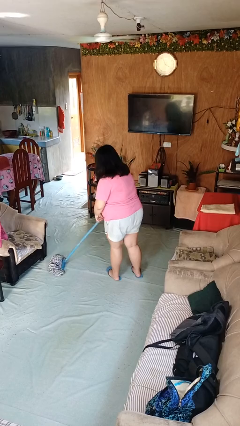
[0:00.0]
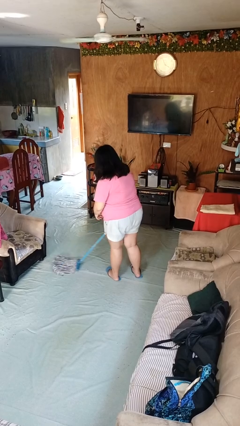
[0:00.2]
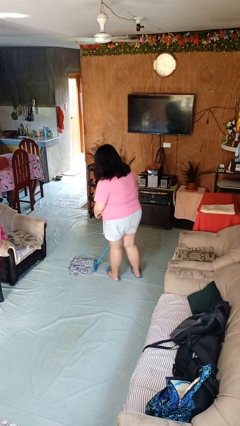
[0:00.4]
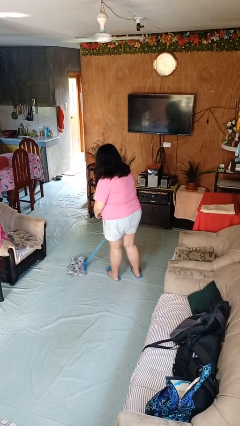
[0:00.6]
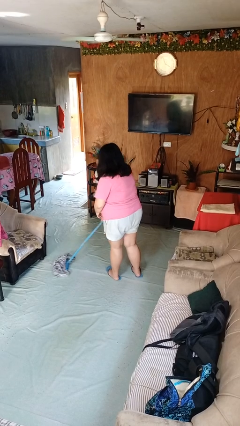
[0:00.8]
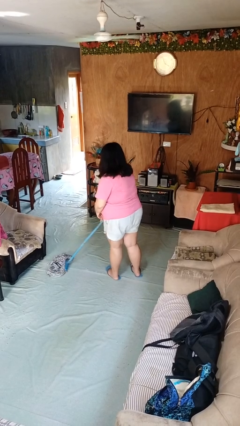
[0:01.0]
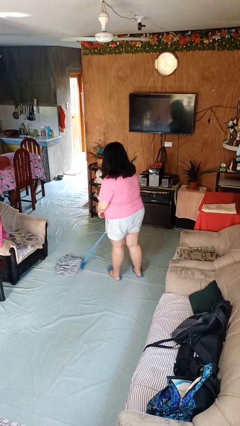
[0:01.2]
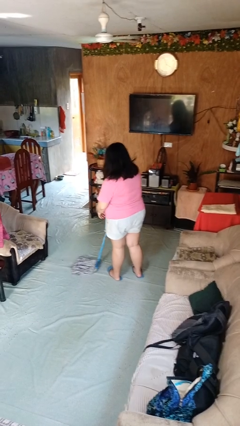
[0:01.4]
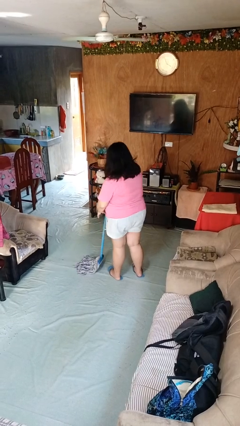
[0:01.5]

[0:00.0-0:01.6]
person mops

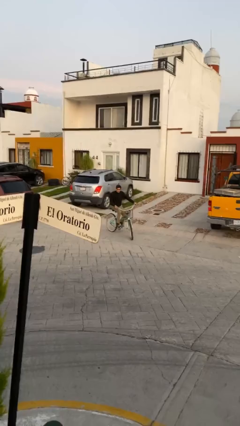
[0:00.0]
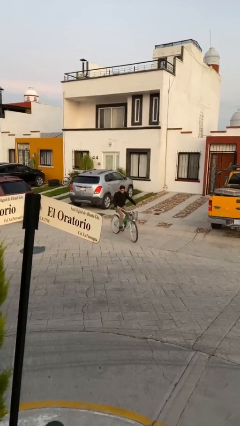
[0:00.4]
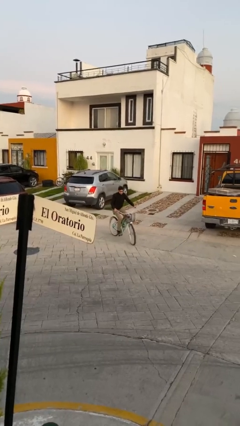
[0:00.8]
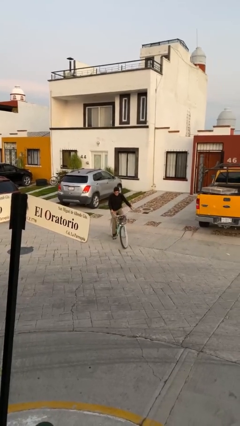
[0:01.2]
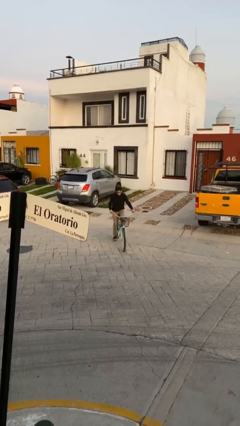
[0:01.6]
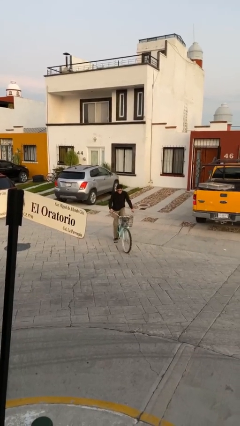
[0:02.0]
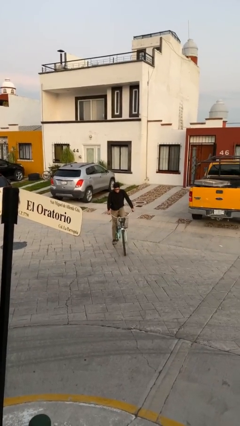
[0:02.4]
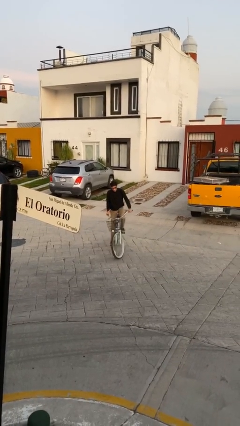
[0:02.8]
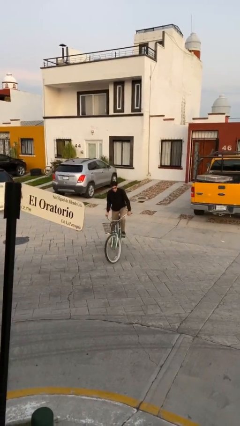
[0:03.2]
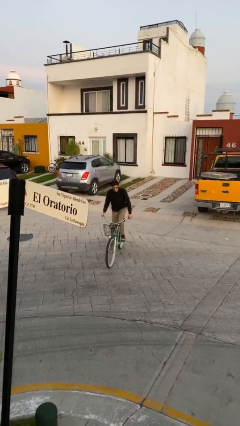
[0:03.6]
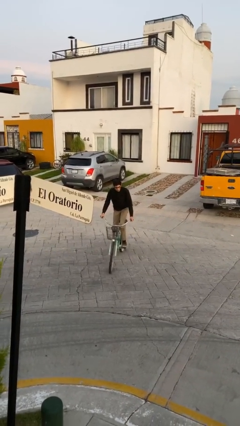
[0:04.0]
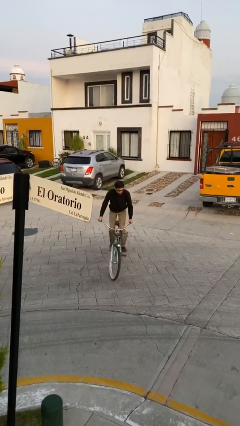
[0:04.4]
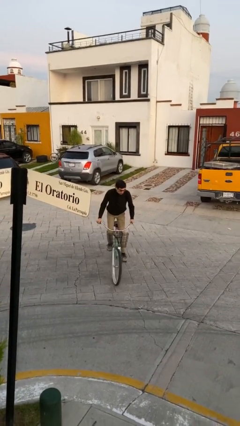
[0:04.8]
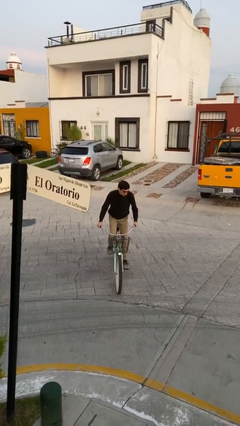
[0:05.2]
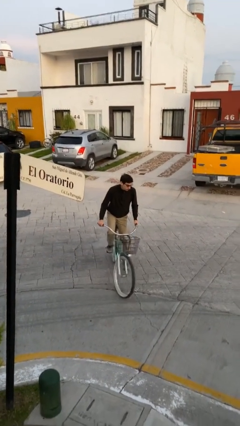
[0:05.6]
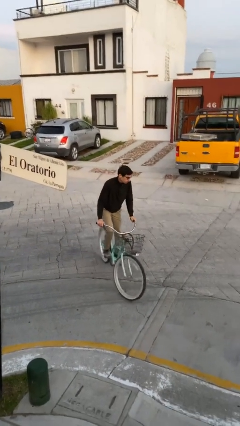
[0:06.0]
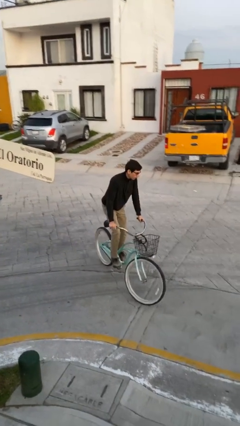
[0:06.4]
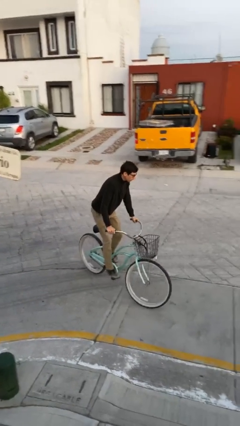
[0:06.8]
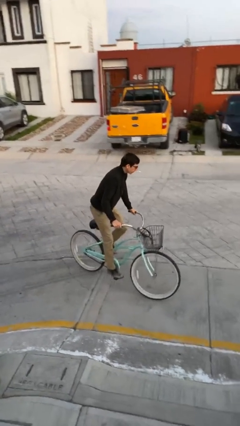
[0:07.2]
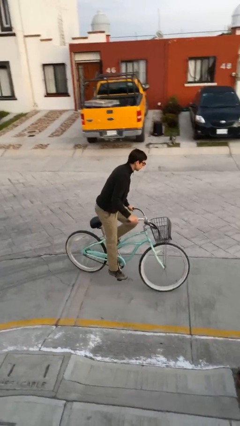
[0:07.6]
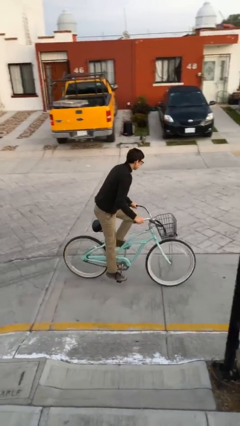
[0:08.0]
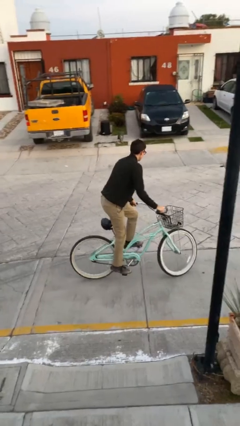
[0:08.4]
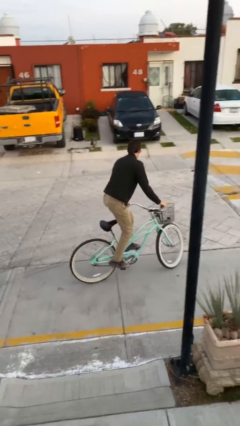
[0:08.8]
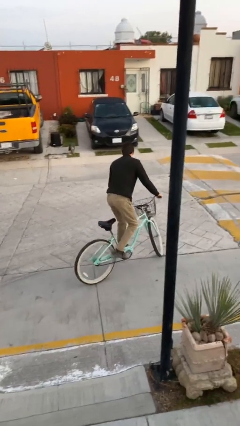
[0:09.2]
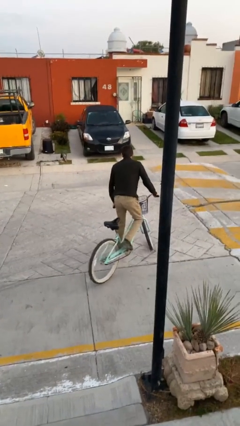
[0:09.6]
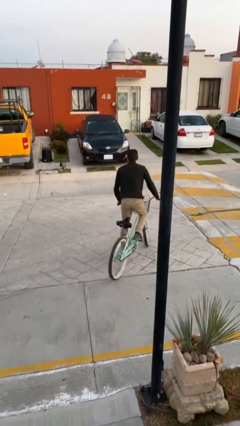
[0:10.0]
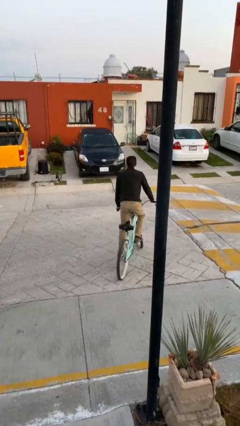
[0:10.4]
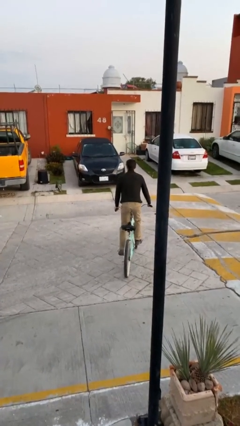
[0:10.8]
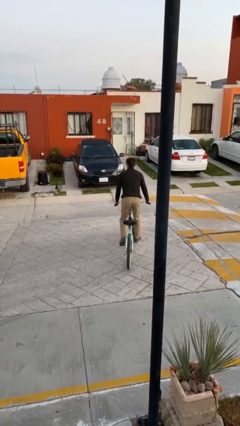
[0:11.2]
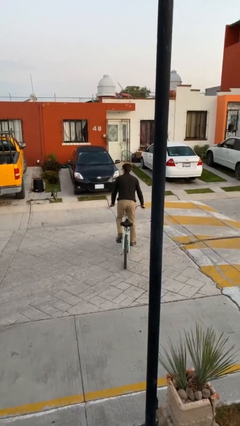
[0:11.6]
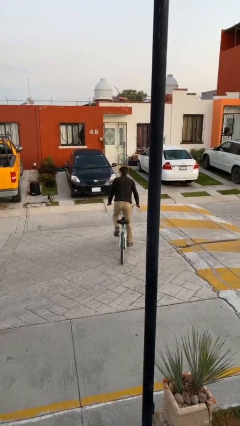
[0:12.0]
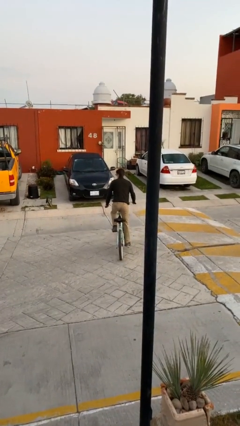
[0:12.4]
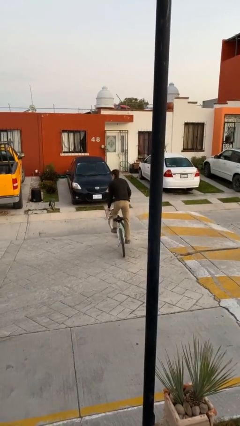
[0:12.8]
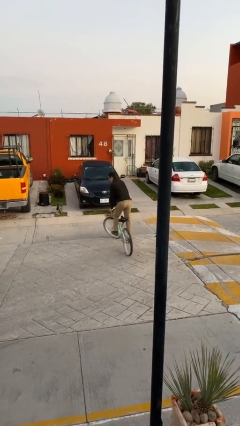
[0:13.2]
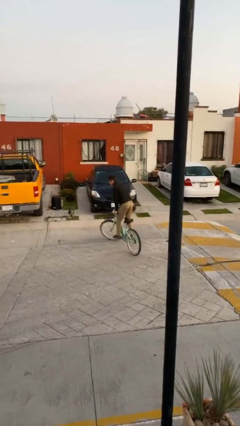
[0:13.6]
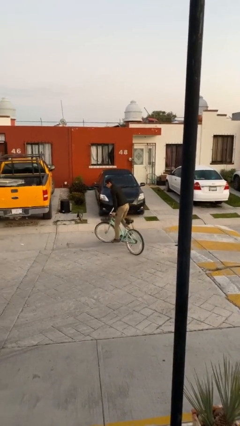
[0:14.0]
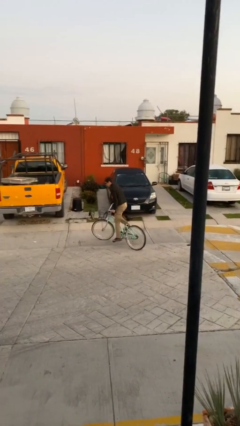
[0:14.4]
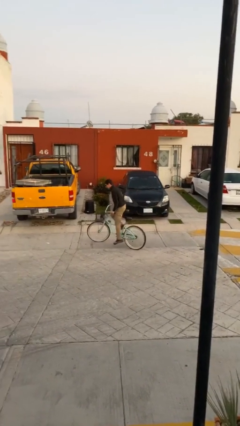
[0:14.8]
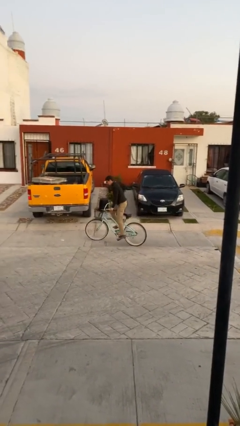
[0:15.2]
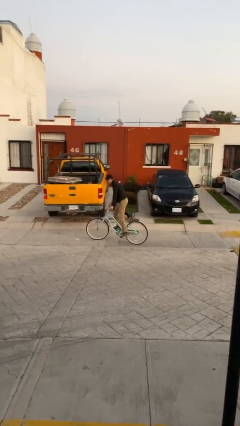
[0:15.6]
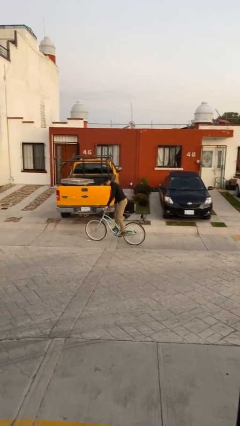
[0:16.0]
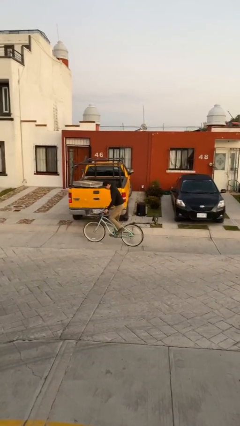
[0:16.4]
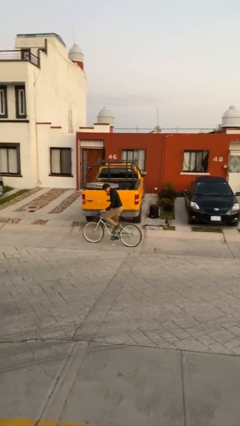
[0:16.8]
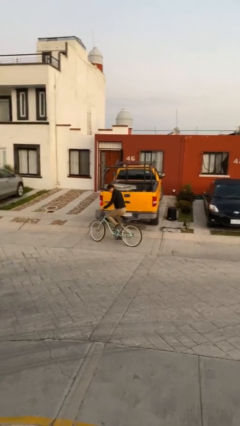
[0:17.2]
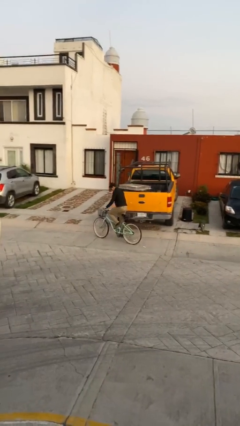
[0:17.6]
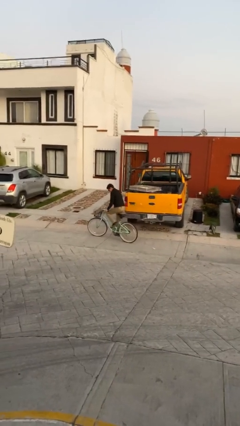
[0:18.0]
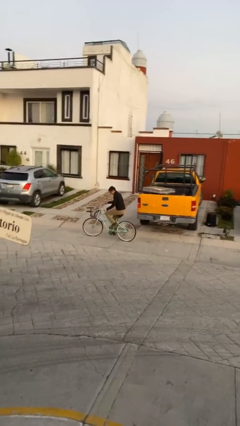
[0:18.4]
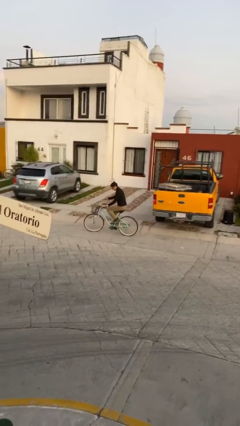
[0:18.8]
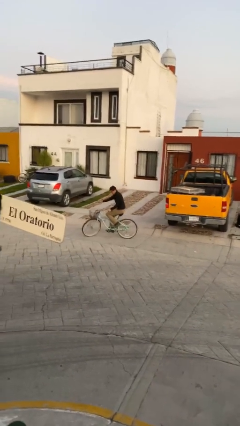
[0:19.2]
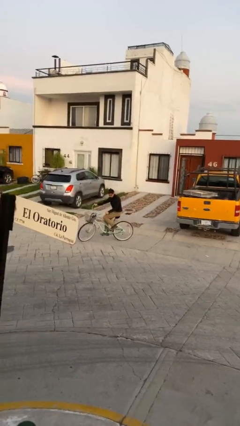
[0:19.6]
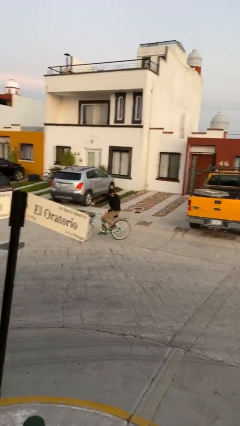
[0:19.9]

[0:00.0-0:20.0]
person rides bicycle

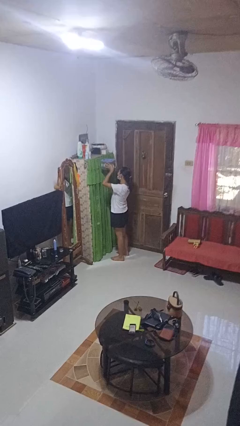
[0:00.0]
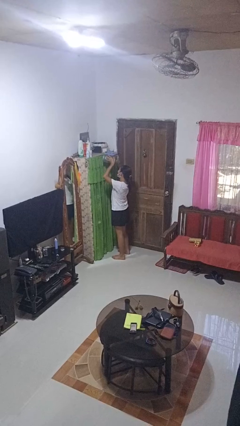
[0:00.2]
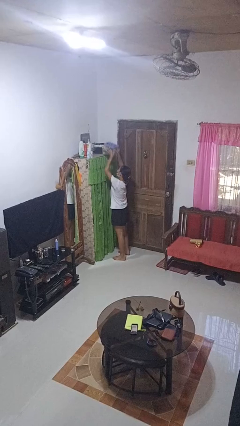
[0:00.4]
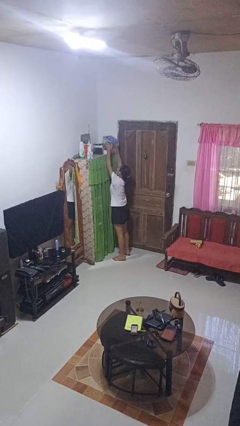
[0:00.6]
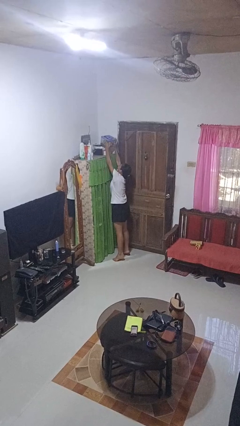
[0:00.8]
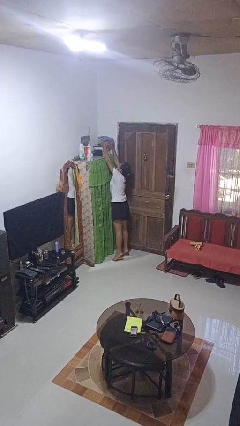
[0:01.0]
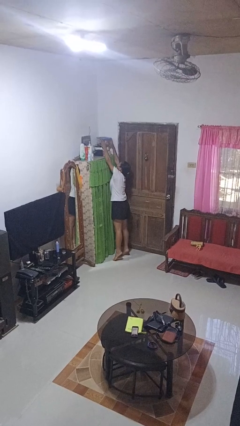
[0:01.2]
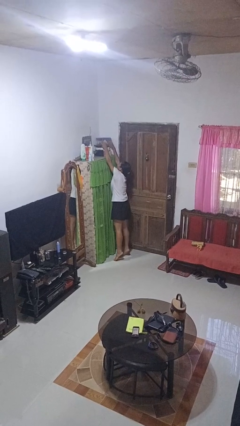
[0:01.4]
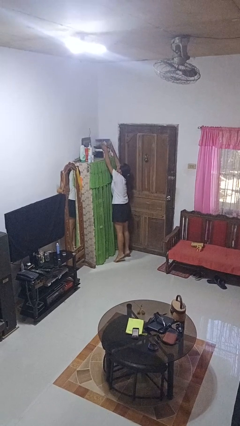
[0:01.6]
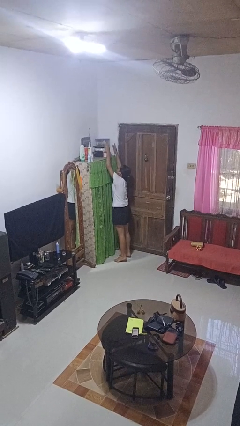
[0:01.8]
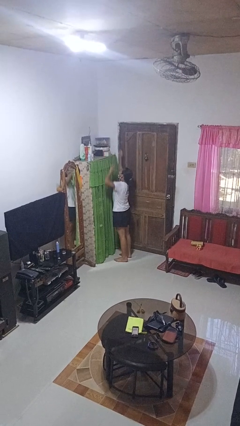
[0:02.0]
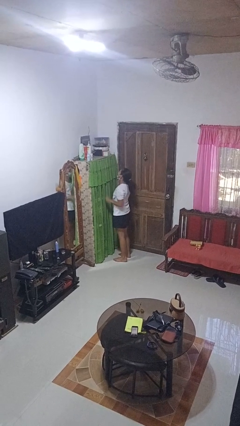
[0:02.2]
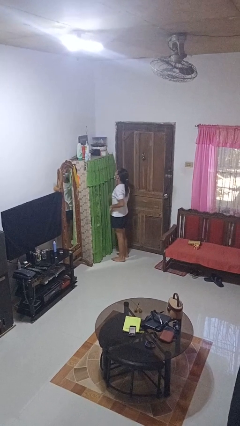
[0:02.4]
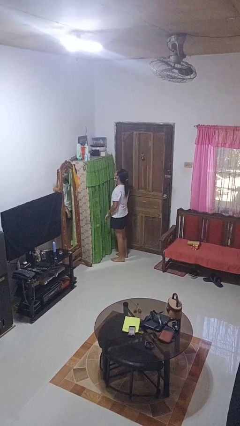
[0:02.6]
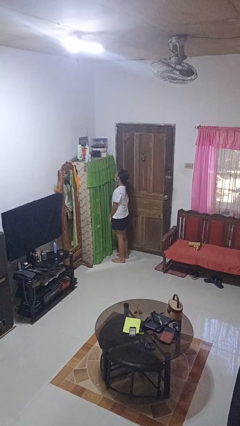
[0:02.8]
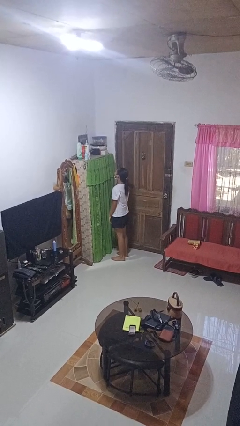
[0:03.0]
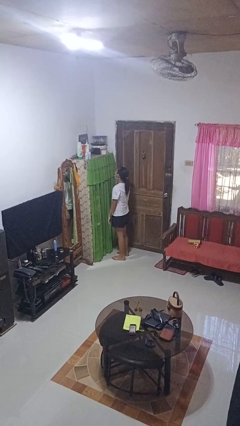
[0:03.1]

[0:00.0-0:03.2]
person puts down object on shelf

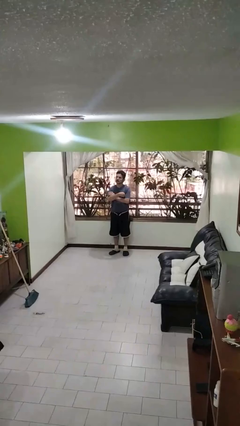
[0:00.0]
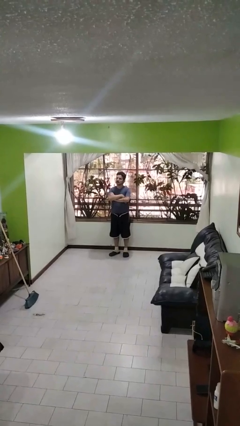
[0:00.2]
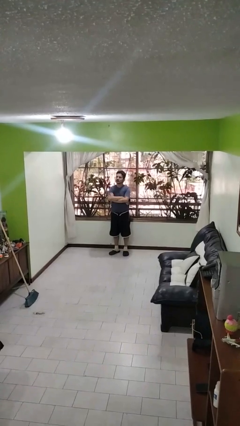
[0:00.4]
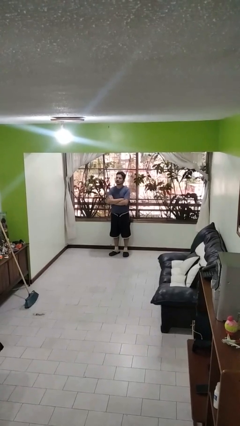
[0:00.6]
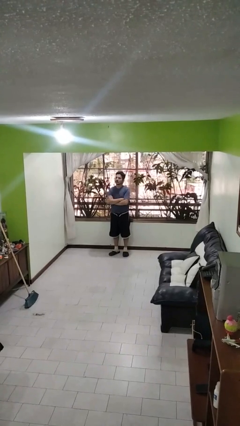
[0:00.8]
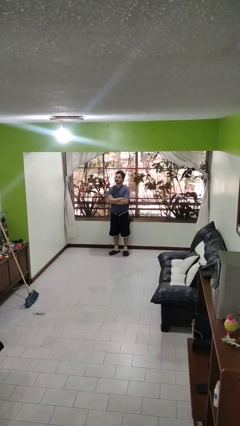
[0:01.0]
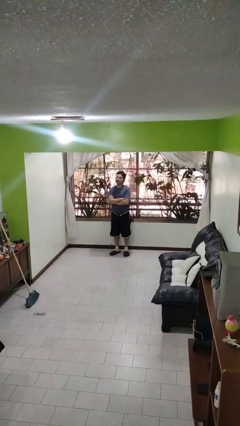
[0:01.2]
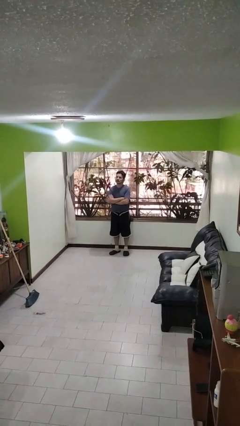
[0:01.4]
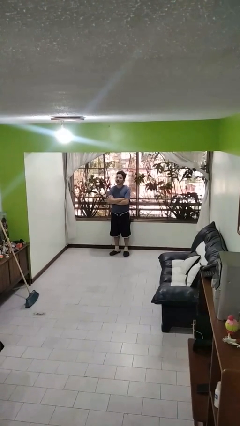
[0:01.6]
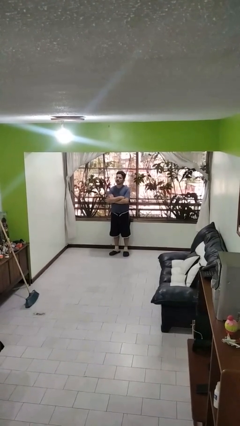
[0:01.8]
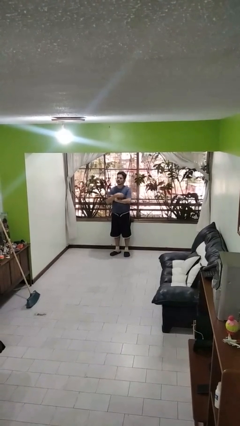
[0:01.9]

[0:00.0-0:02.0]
person crosses arms

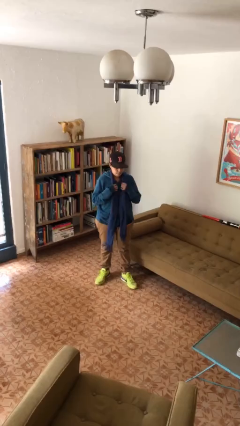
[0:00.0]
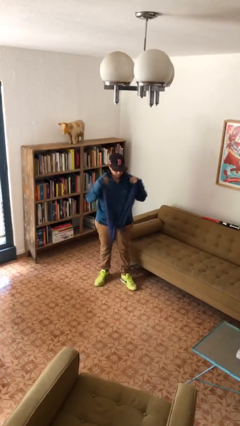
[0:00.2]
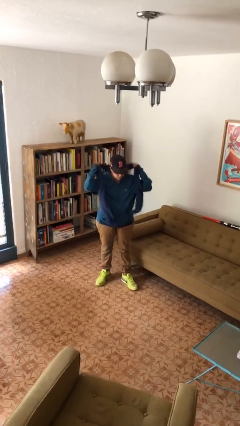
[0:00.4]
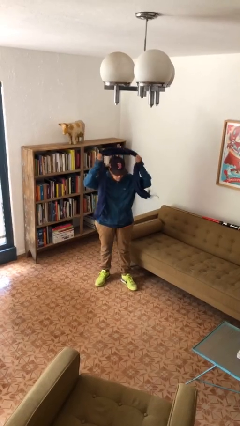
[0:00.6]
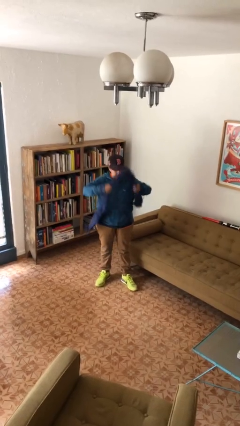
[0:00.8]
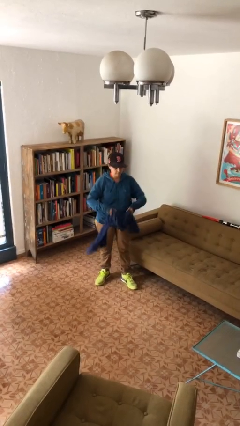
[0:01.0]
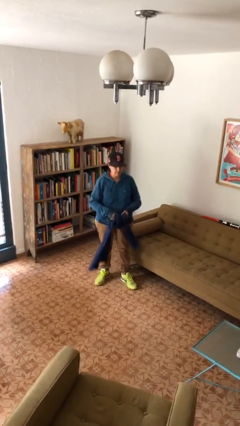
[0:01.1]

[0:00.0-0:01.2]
person takes off scarf
